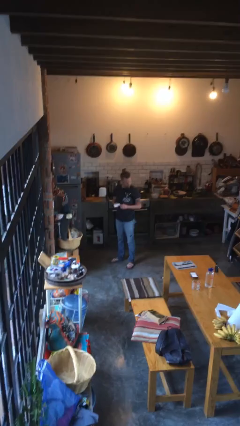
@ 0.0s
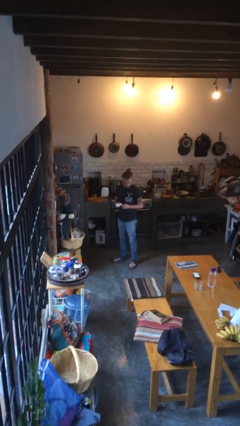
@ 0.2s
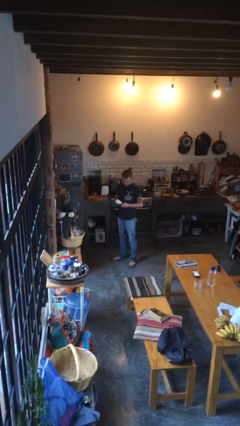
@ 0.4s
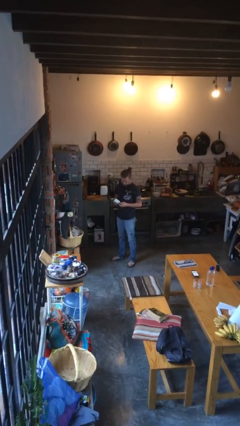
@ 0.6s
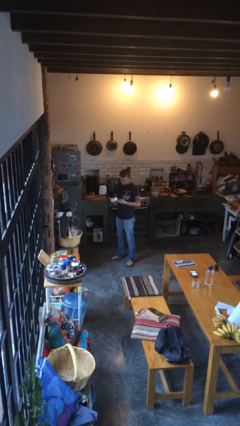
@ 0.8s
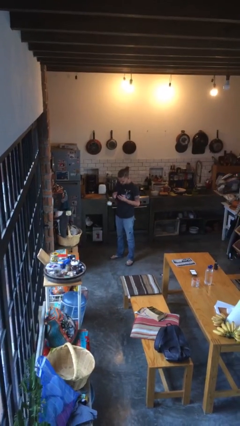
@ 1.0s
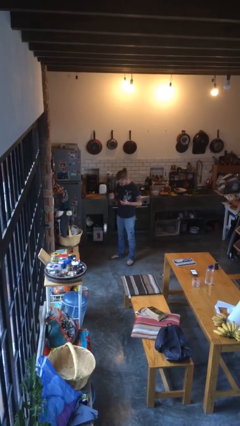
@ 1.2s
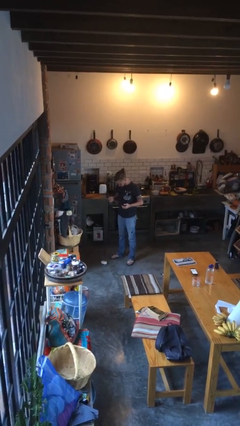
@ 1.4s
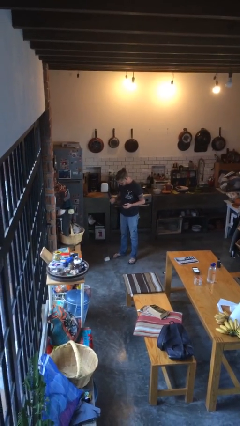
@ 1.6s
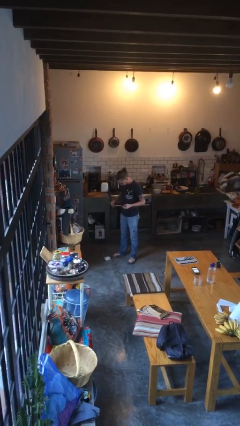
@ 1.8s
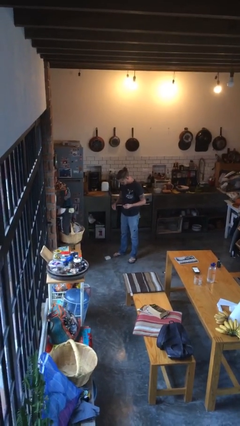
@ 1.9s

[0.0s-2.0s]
person drops object

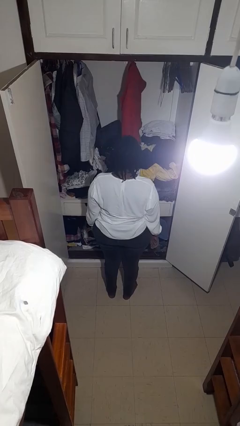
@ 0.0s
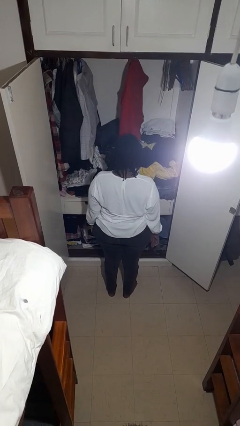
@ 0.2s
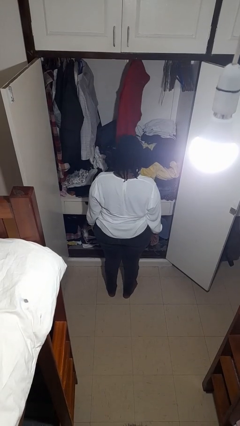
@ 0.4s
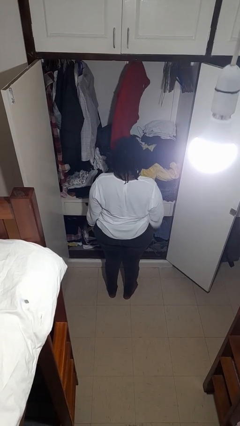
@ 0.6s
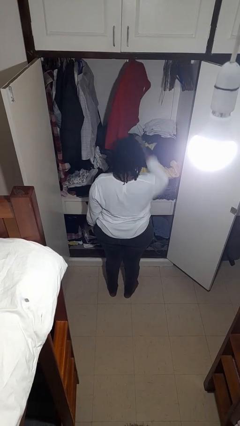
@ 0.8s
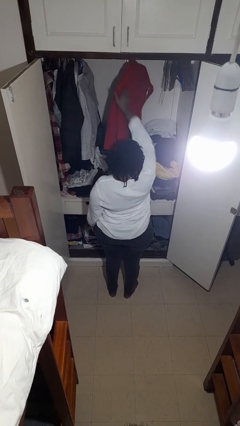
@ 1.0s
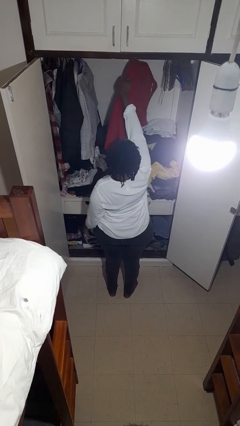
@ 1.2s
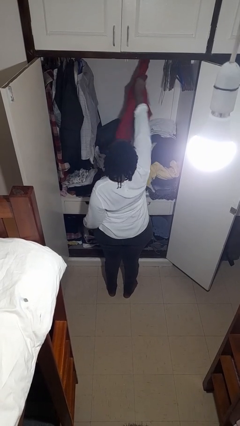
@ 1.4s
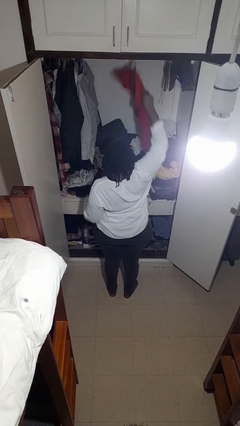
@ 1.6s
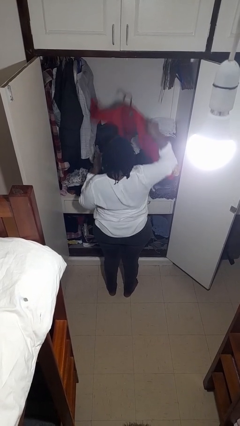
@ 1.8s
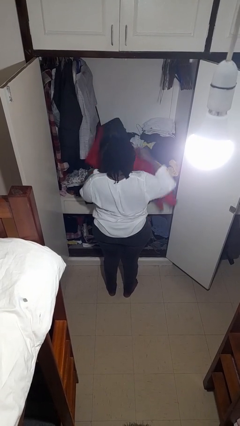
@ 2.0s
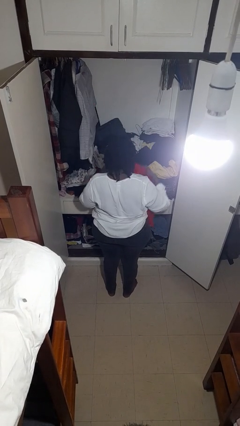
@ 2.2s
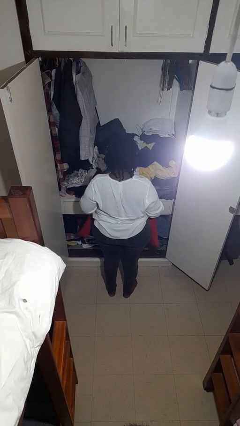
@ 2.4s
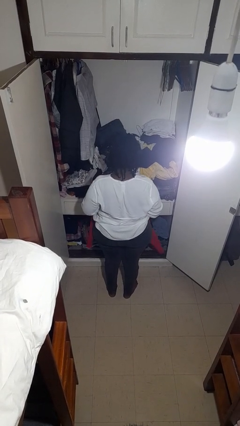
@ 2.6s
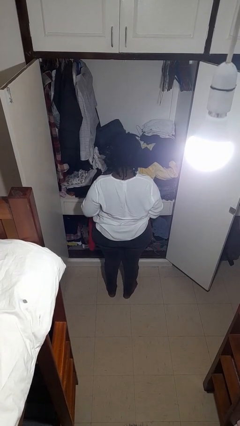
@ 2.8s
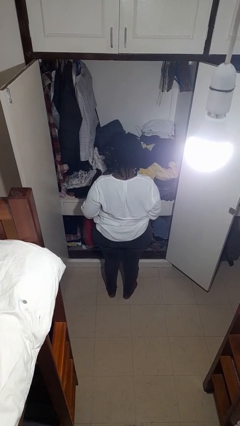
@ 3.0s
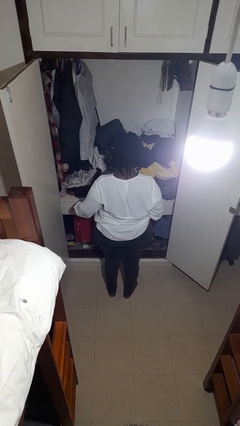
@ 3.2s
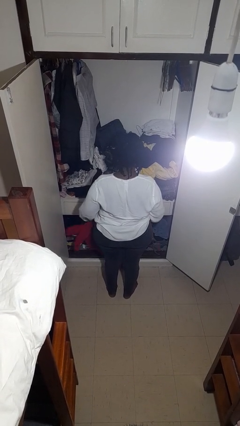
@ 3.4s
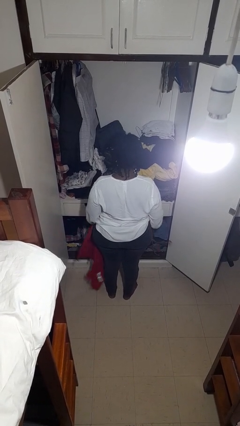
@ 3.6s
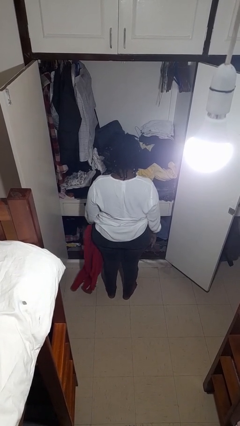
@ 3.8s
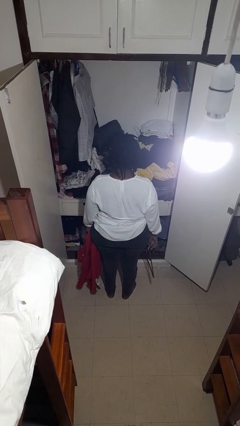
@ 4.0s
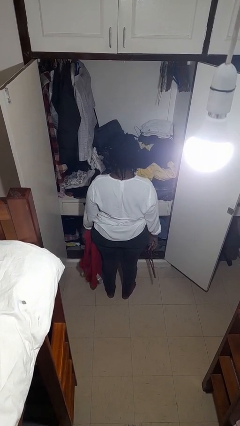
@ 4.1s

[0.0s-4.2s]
person takes clothes from closet

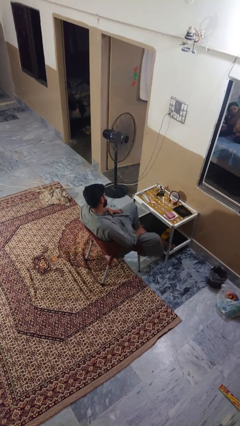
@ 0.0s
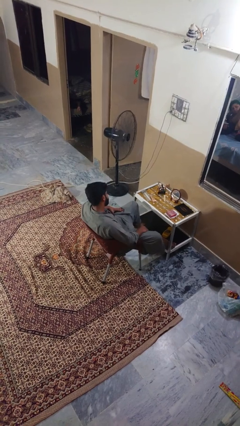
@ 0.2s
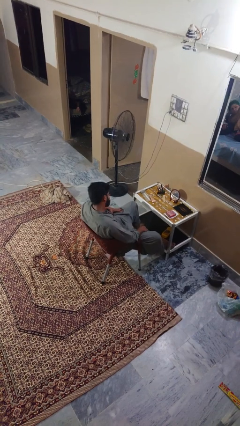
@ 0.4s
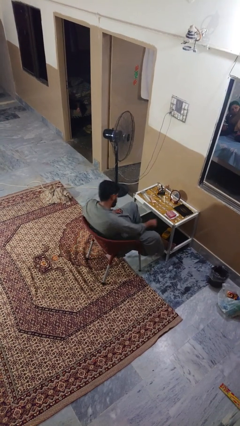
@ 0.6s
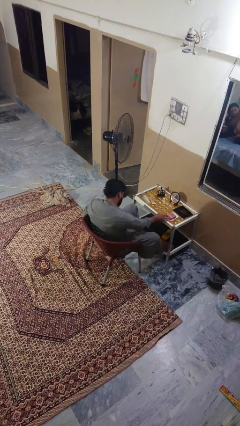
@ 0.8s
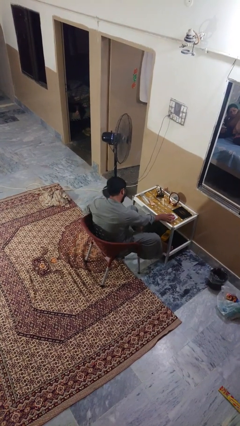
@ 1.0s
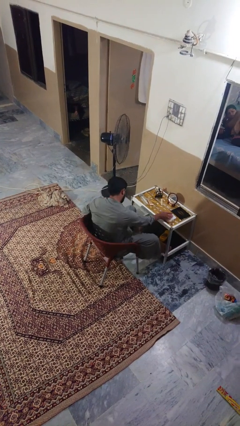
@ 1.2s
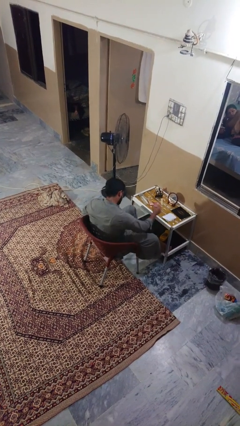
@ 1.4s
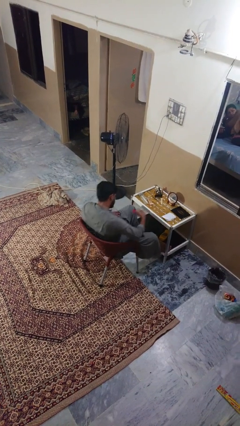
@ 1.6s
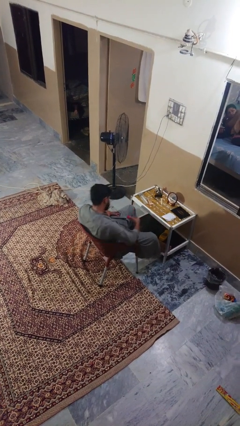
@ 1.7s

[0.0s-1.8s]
person picks up object from table

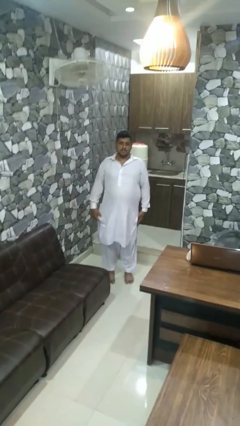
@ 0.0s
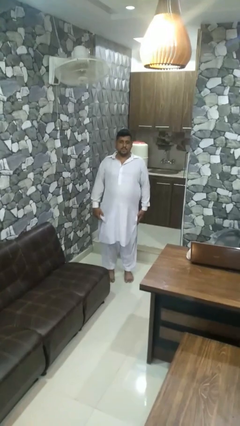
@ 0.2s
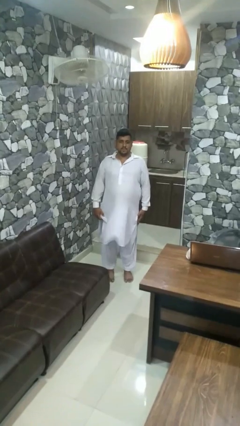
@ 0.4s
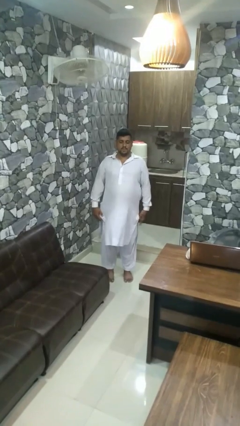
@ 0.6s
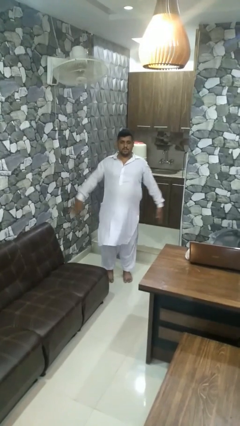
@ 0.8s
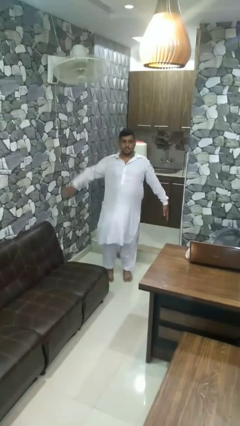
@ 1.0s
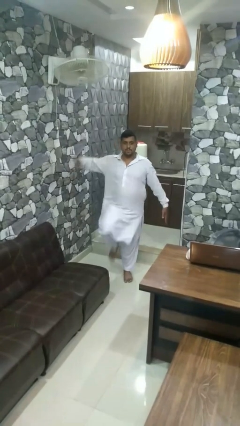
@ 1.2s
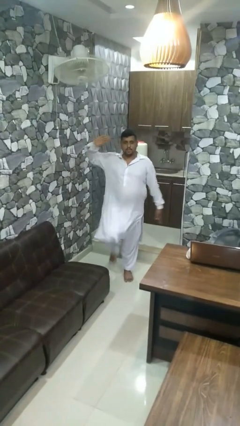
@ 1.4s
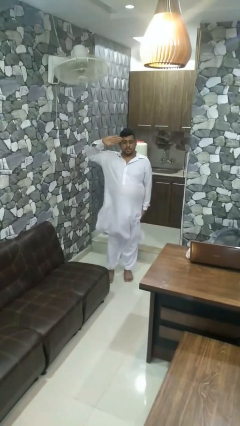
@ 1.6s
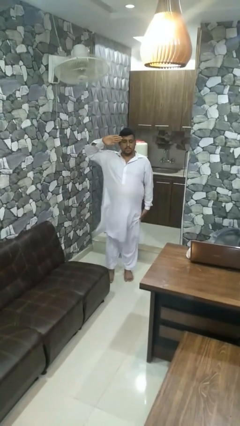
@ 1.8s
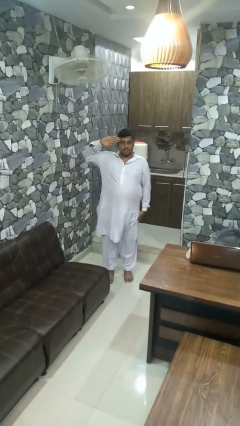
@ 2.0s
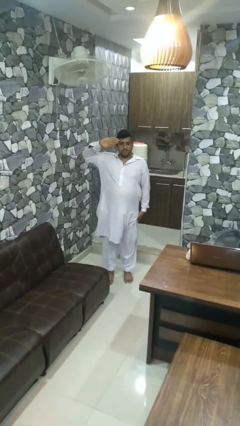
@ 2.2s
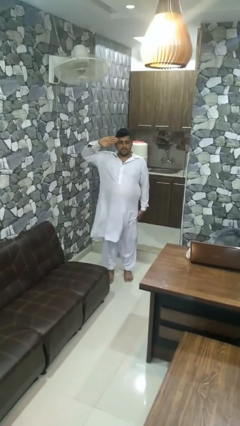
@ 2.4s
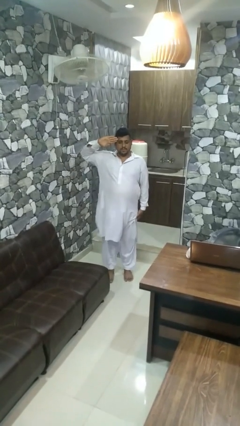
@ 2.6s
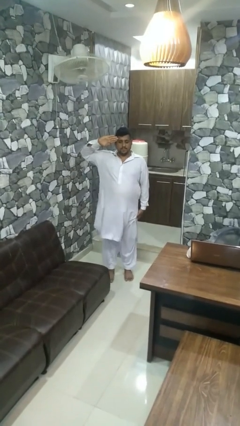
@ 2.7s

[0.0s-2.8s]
person salutes

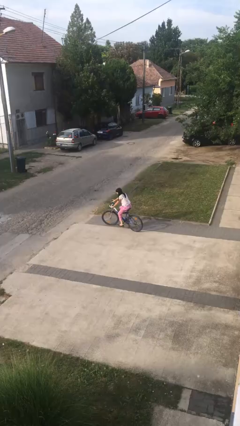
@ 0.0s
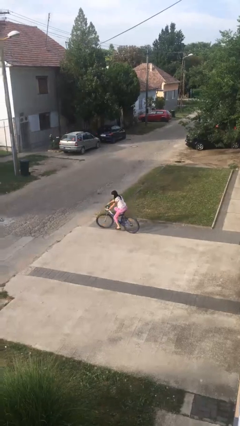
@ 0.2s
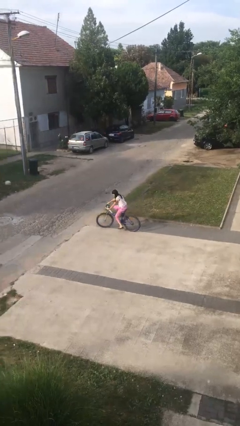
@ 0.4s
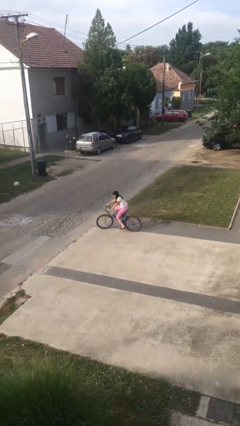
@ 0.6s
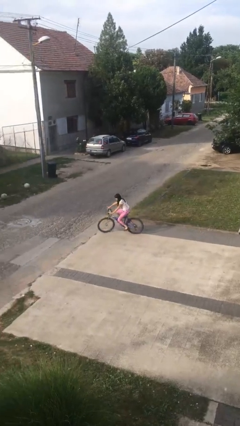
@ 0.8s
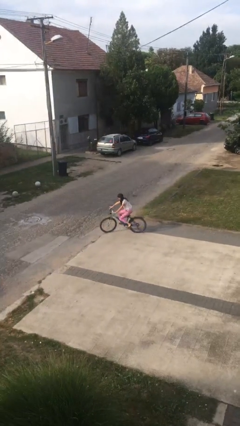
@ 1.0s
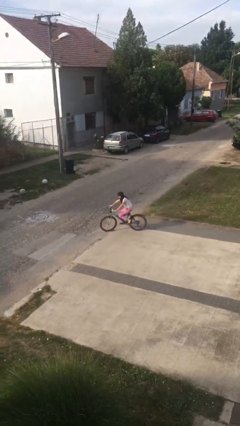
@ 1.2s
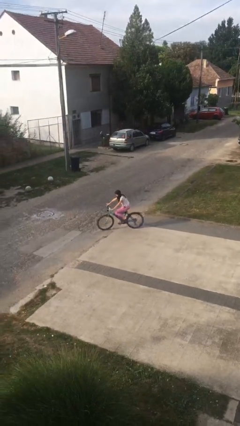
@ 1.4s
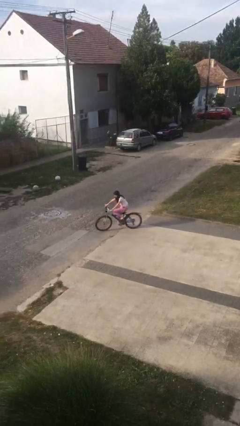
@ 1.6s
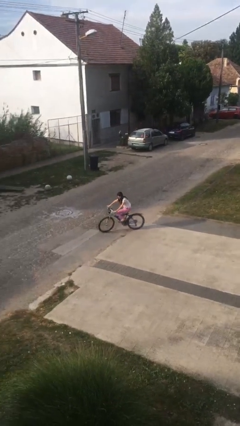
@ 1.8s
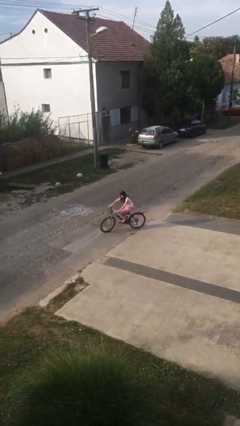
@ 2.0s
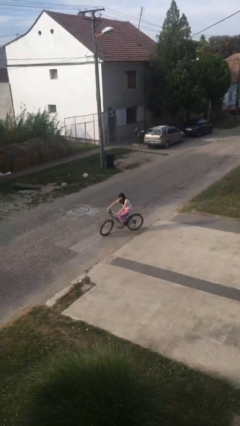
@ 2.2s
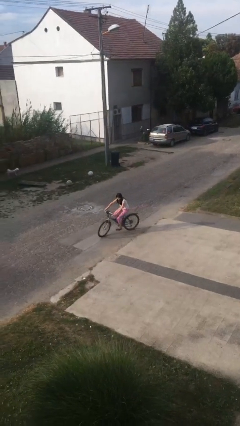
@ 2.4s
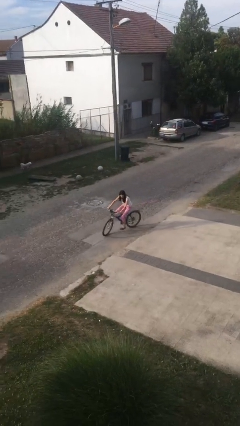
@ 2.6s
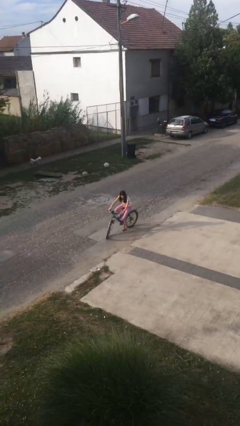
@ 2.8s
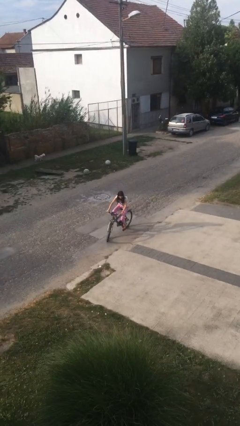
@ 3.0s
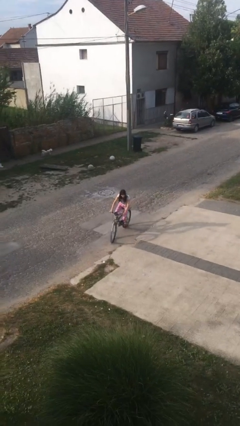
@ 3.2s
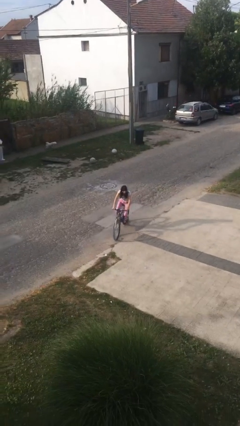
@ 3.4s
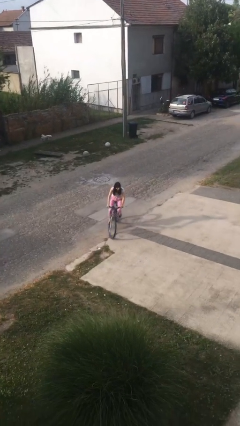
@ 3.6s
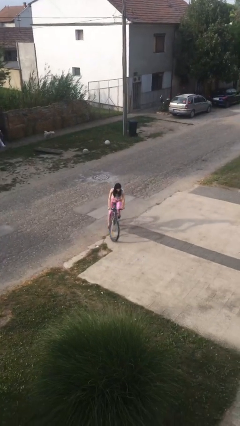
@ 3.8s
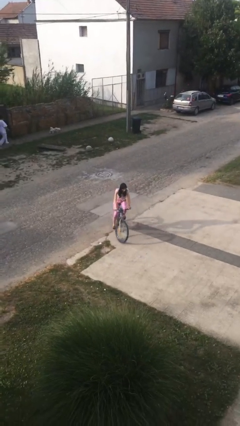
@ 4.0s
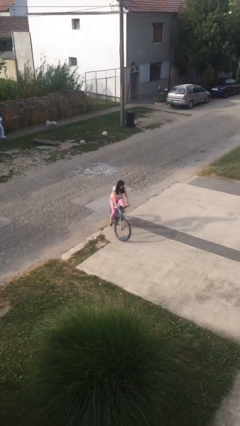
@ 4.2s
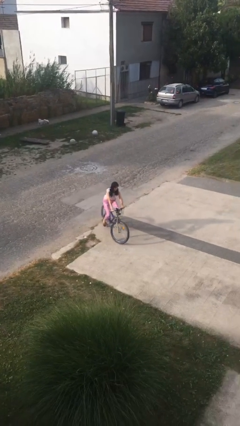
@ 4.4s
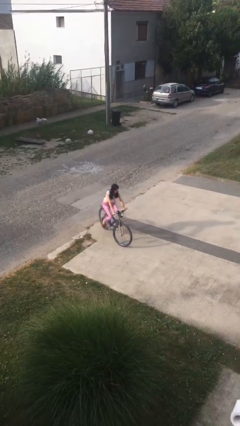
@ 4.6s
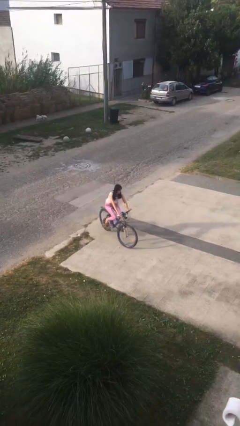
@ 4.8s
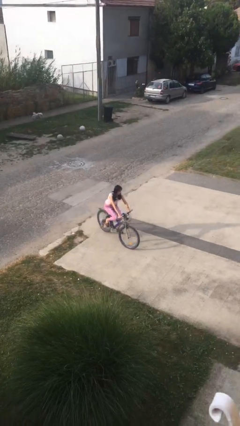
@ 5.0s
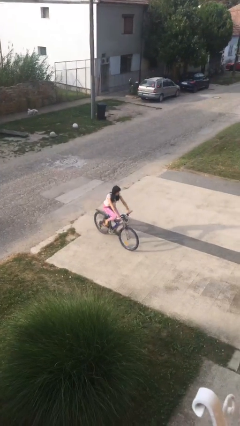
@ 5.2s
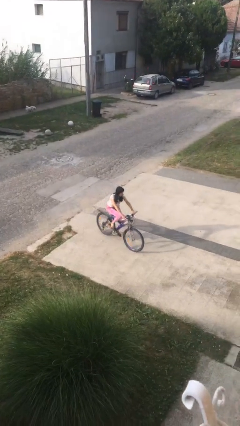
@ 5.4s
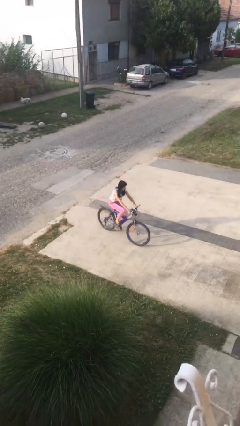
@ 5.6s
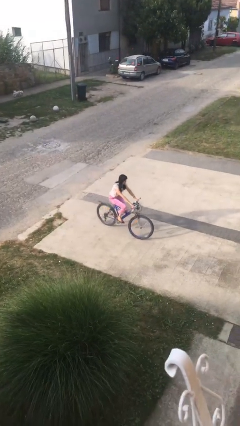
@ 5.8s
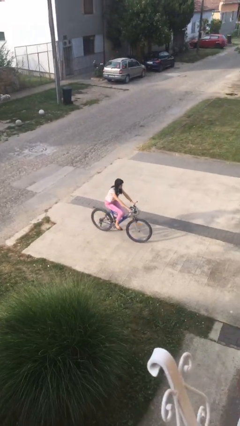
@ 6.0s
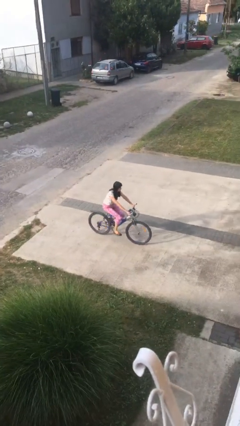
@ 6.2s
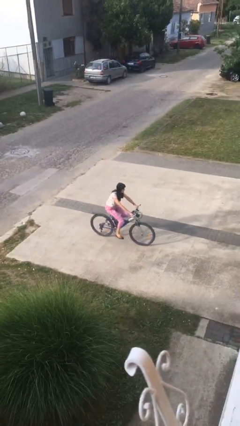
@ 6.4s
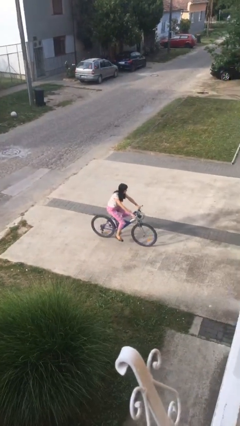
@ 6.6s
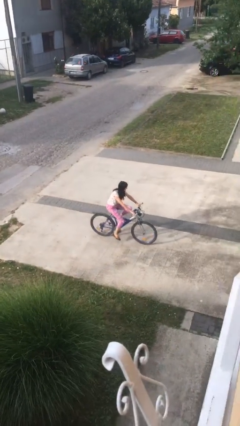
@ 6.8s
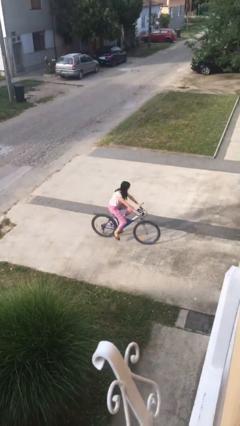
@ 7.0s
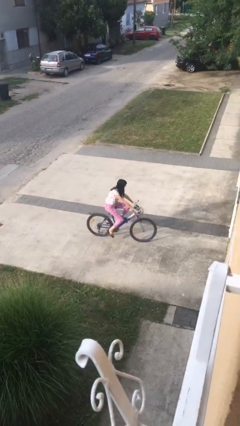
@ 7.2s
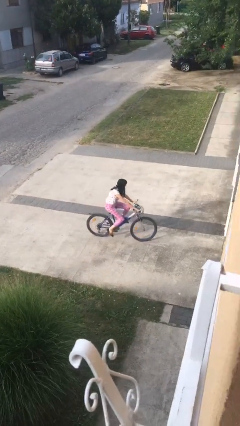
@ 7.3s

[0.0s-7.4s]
person rides bicycle
